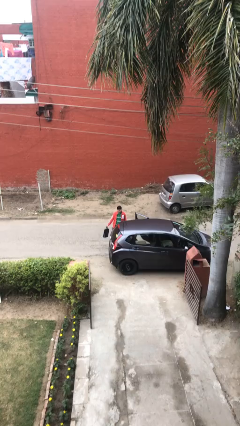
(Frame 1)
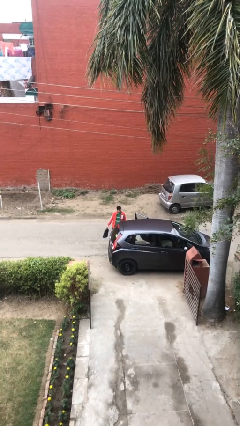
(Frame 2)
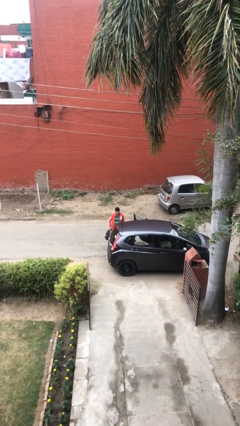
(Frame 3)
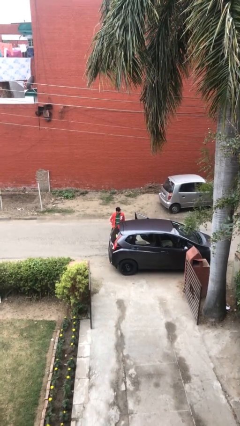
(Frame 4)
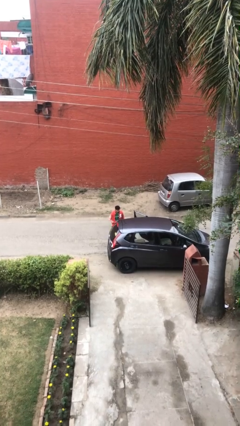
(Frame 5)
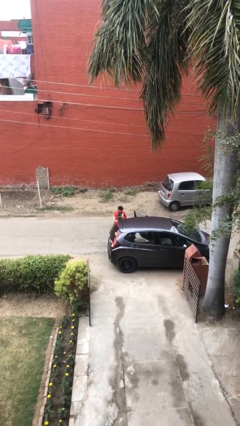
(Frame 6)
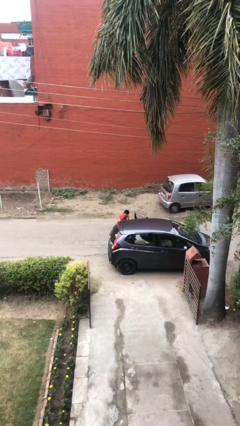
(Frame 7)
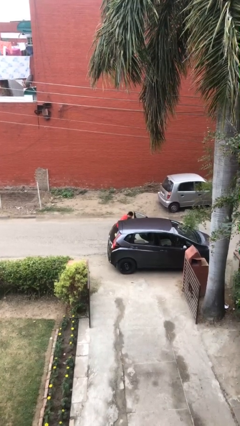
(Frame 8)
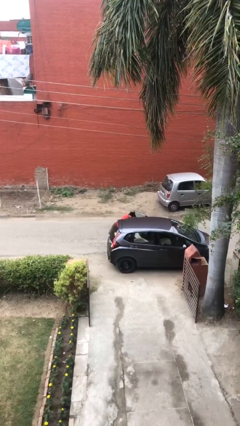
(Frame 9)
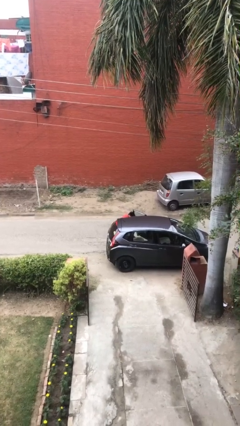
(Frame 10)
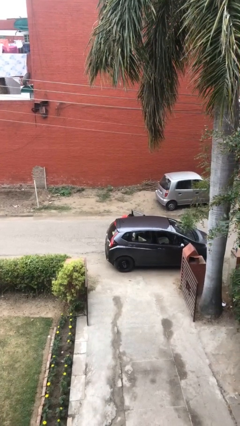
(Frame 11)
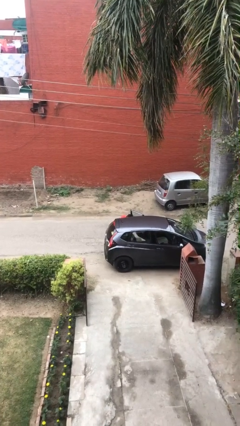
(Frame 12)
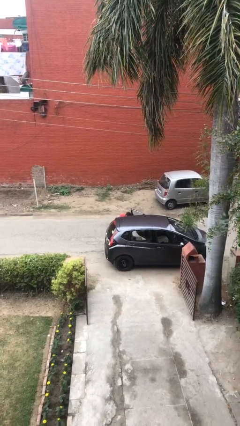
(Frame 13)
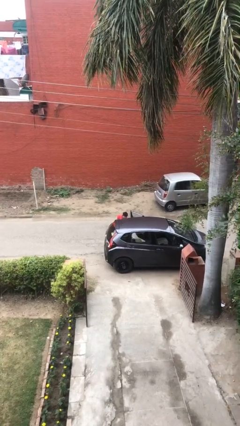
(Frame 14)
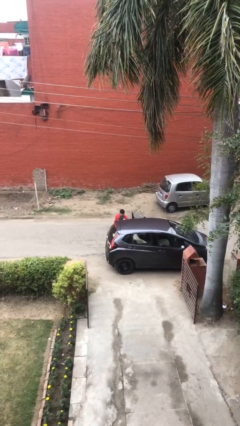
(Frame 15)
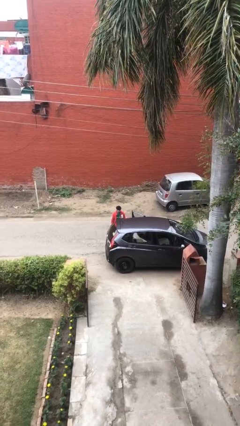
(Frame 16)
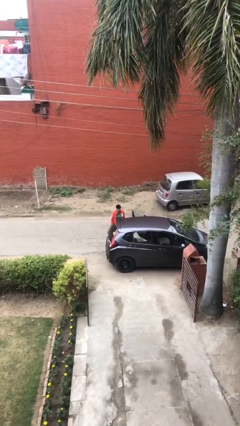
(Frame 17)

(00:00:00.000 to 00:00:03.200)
person loads car

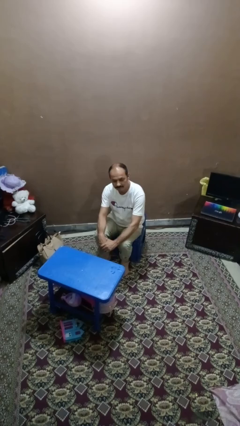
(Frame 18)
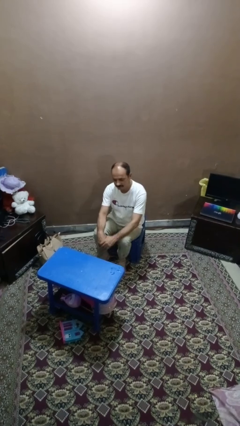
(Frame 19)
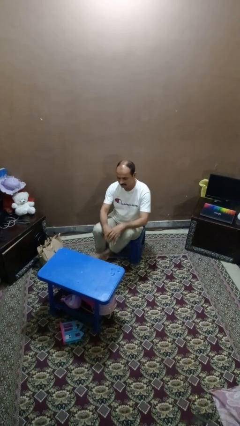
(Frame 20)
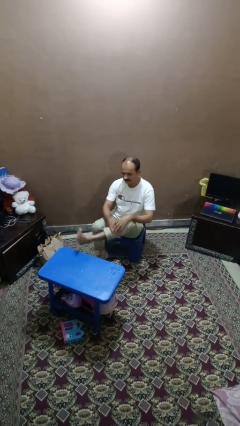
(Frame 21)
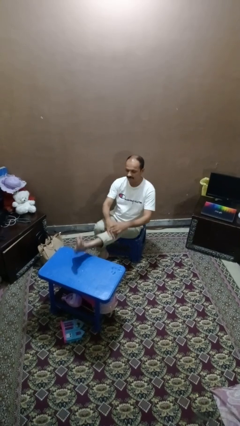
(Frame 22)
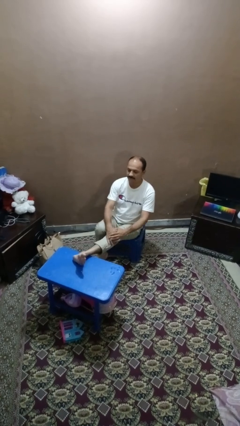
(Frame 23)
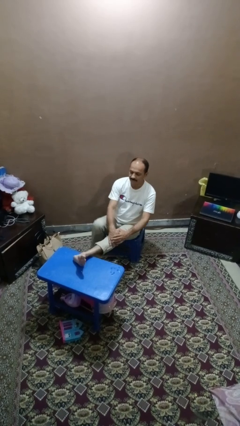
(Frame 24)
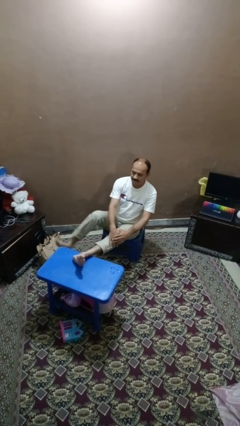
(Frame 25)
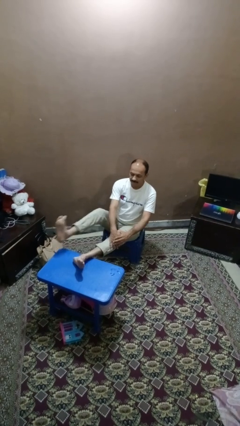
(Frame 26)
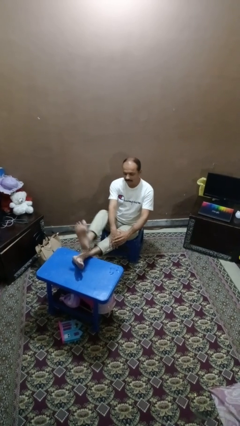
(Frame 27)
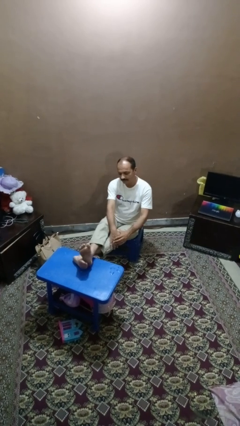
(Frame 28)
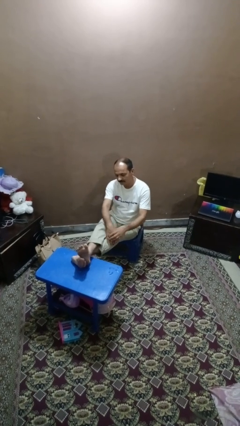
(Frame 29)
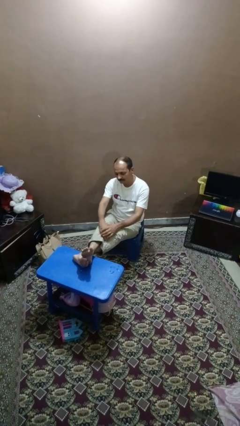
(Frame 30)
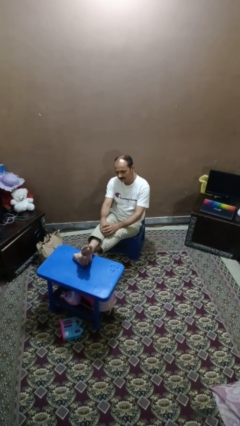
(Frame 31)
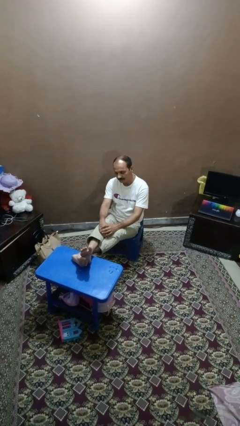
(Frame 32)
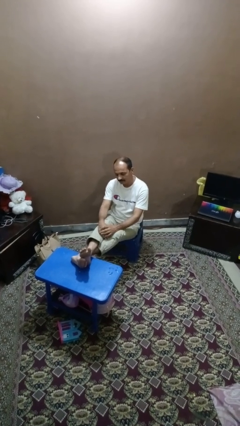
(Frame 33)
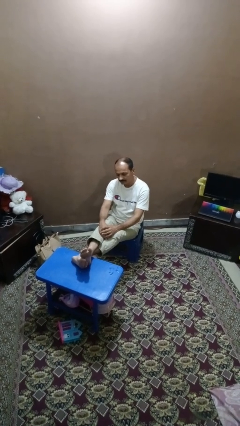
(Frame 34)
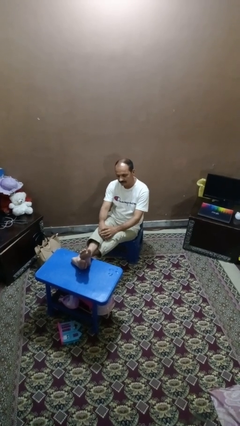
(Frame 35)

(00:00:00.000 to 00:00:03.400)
person puts feet up

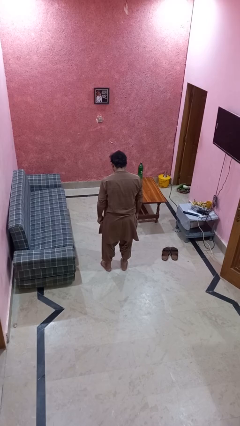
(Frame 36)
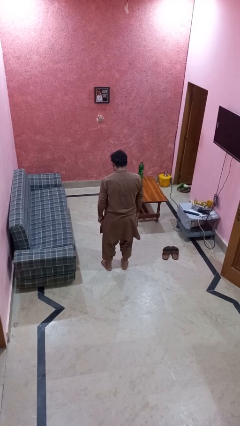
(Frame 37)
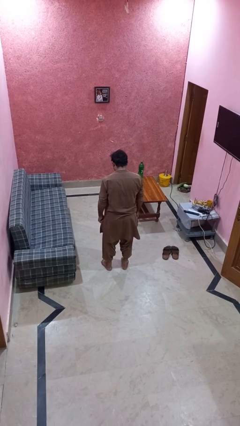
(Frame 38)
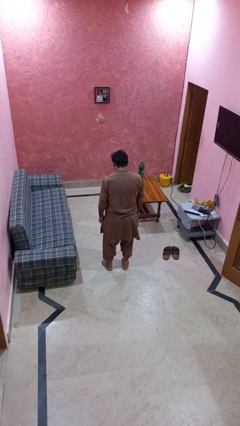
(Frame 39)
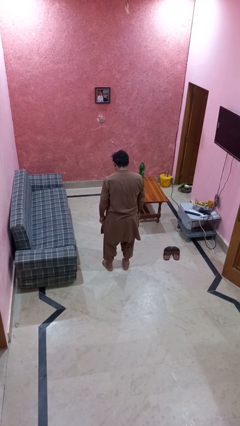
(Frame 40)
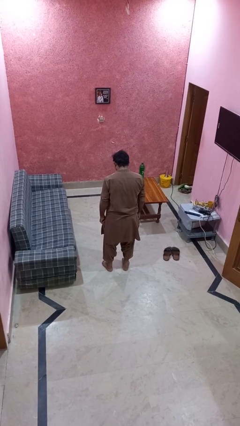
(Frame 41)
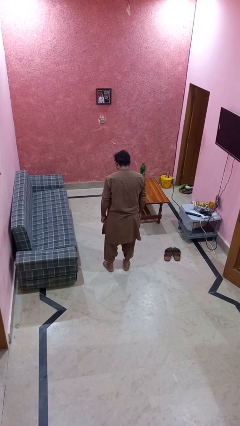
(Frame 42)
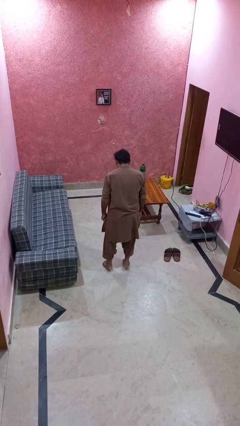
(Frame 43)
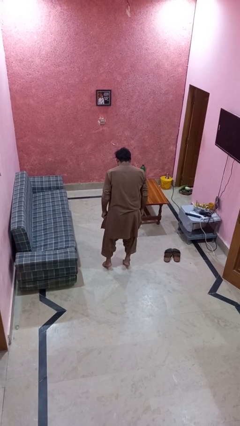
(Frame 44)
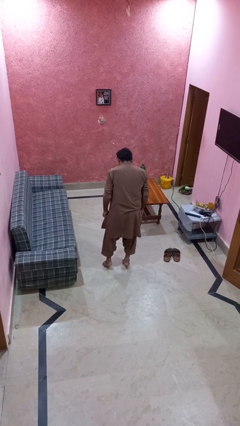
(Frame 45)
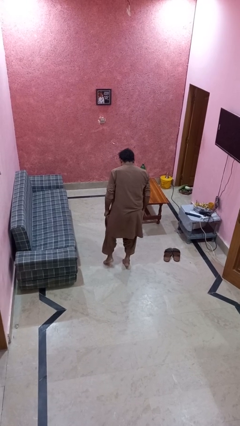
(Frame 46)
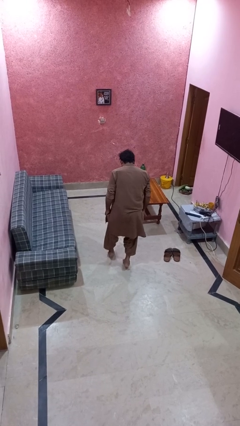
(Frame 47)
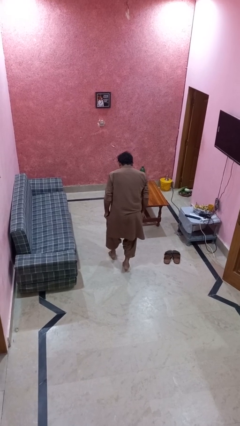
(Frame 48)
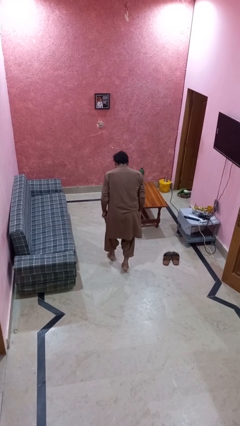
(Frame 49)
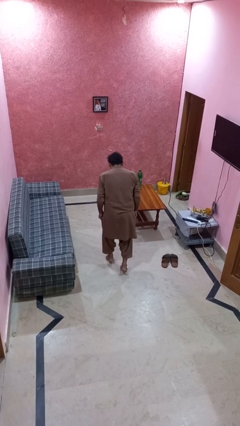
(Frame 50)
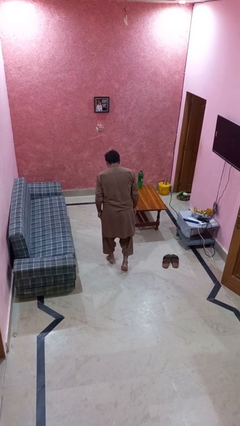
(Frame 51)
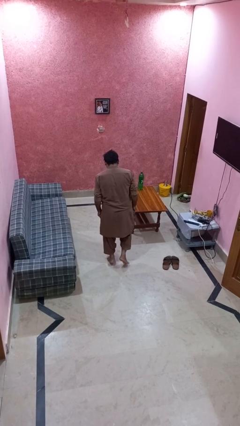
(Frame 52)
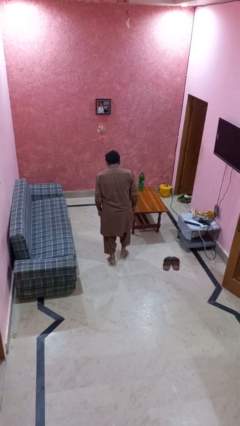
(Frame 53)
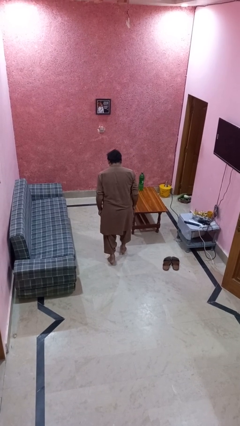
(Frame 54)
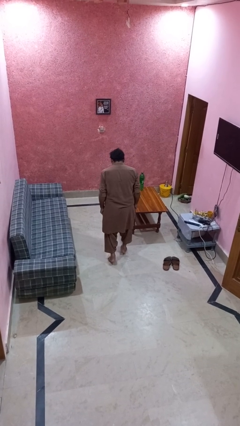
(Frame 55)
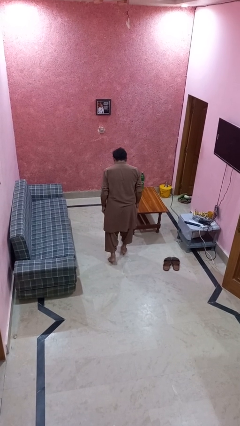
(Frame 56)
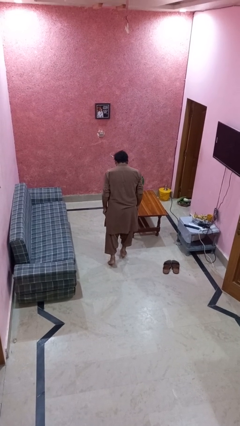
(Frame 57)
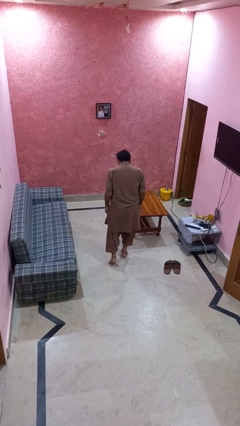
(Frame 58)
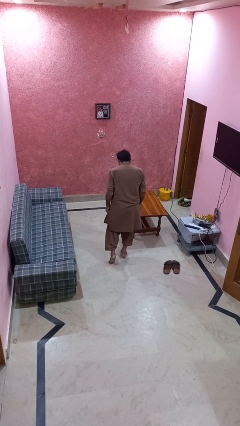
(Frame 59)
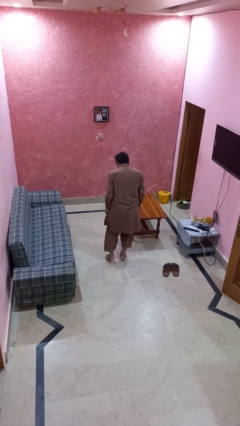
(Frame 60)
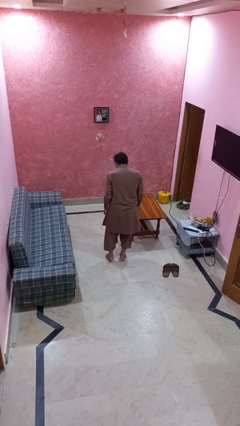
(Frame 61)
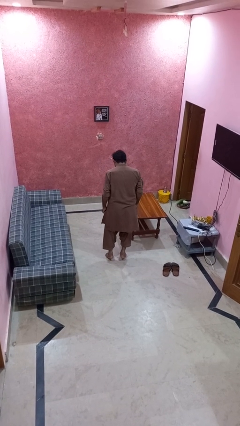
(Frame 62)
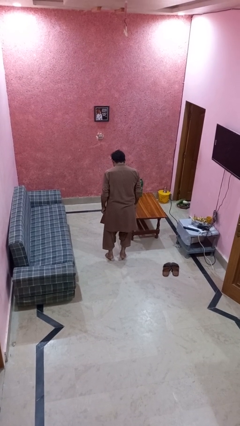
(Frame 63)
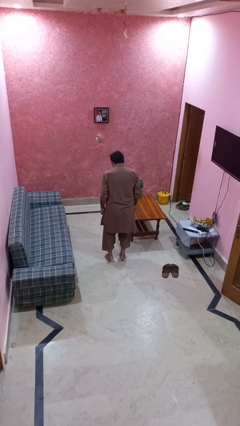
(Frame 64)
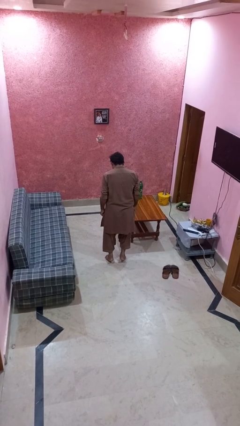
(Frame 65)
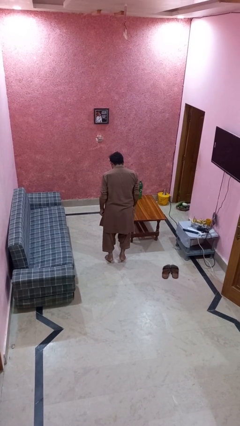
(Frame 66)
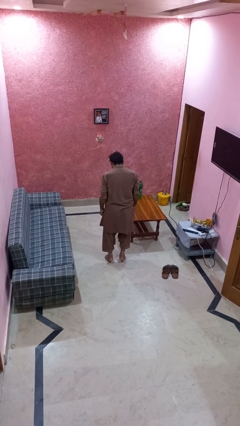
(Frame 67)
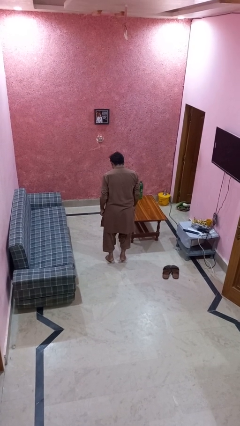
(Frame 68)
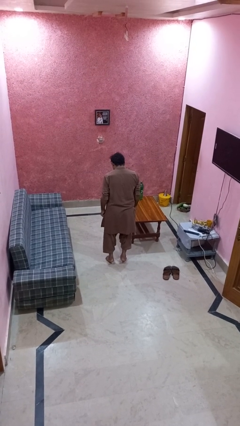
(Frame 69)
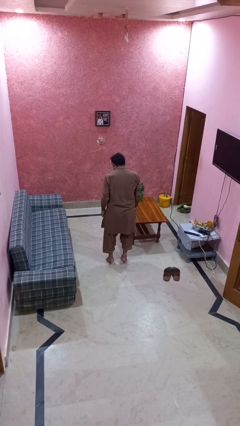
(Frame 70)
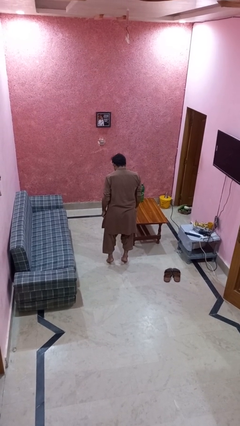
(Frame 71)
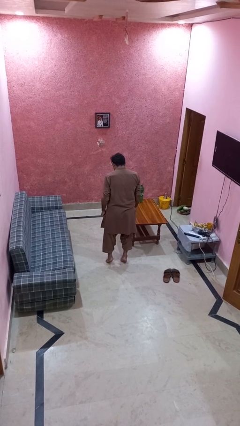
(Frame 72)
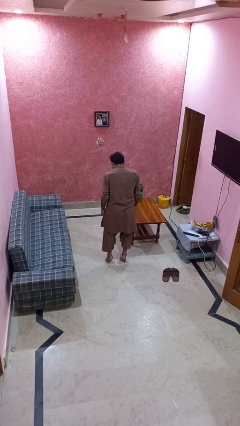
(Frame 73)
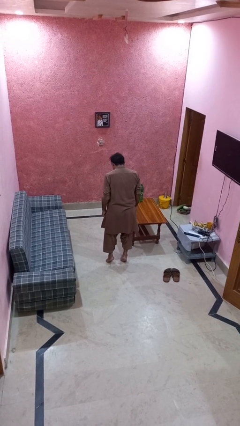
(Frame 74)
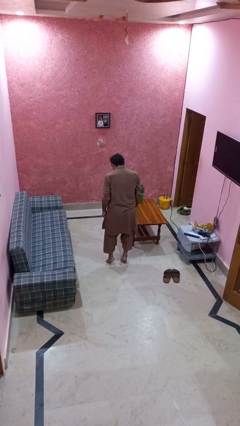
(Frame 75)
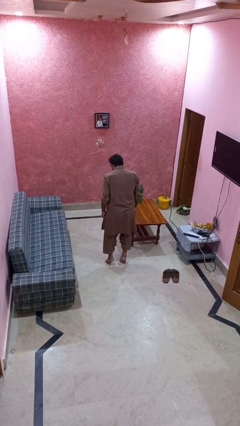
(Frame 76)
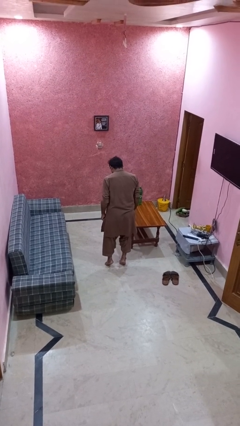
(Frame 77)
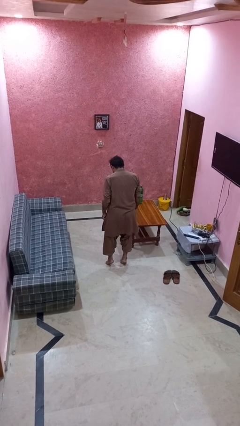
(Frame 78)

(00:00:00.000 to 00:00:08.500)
person walks tiptoe

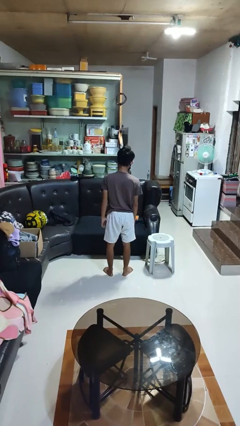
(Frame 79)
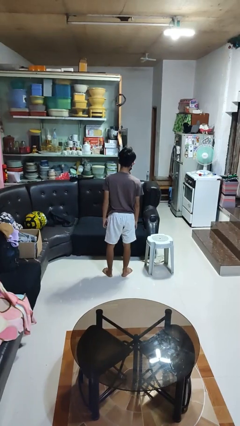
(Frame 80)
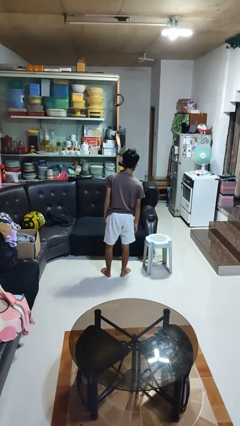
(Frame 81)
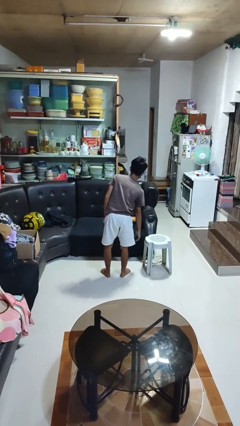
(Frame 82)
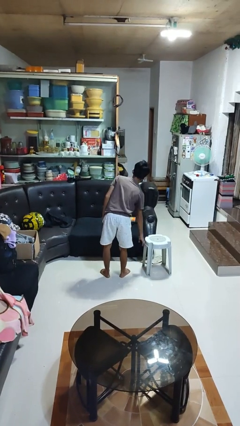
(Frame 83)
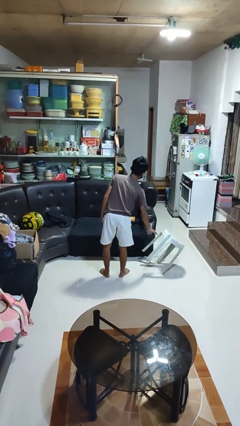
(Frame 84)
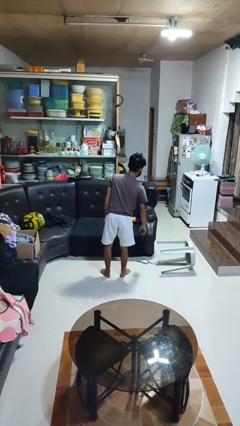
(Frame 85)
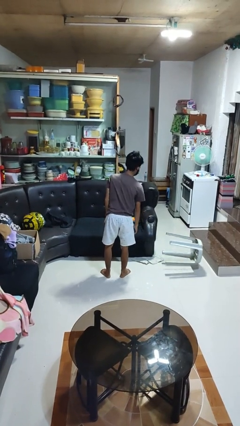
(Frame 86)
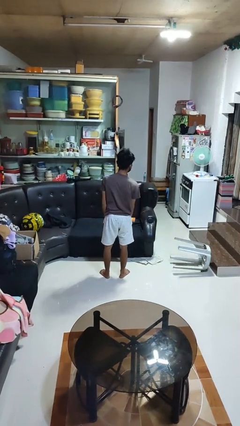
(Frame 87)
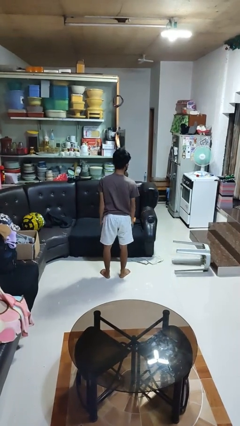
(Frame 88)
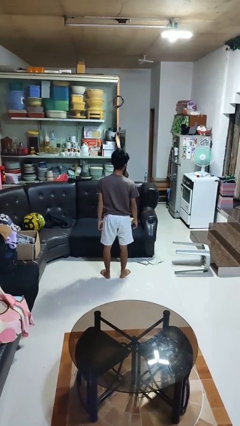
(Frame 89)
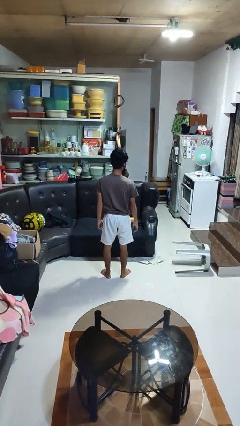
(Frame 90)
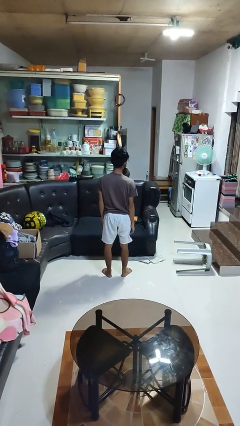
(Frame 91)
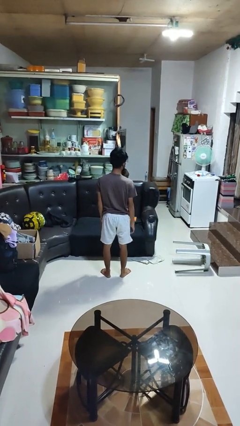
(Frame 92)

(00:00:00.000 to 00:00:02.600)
person knocks over furniture

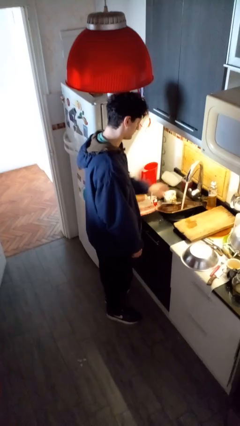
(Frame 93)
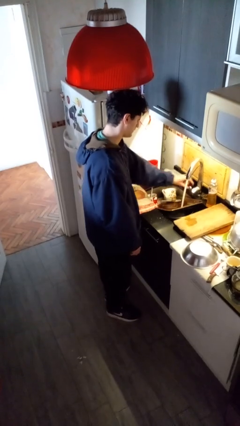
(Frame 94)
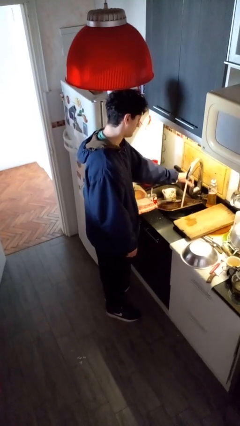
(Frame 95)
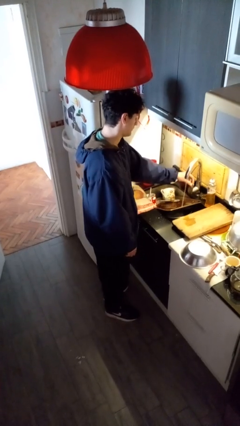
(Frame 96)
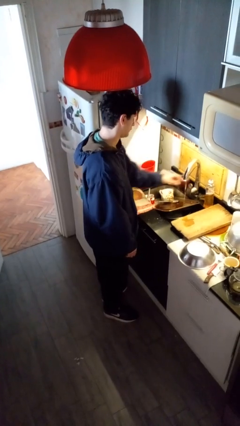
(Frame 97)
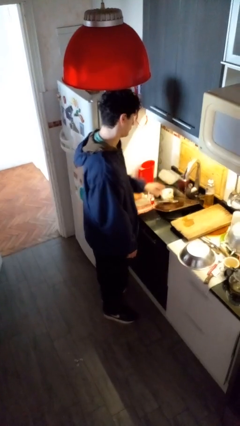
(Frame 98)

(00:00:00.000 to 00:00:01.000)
person turns off faucet
